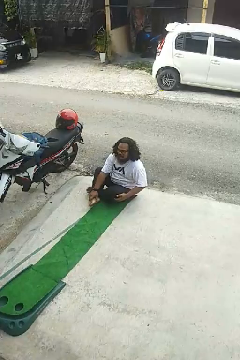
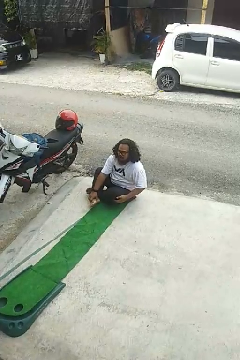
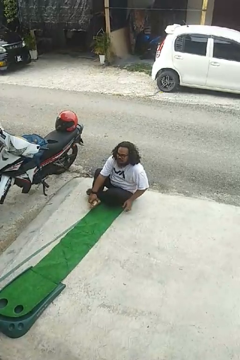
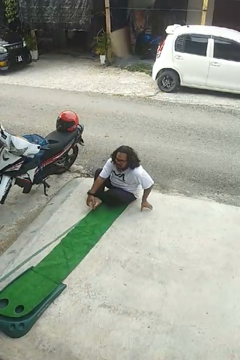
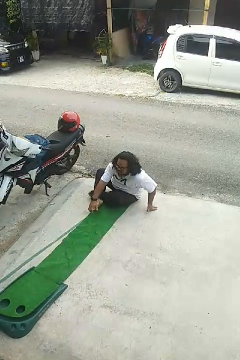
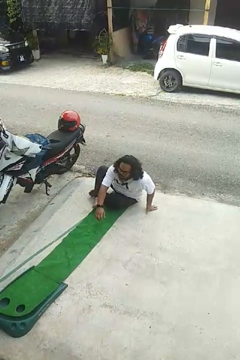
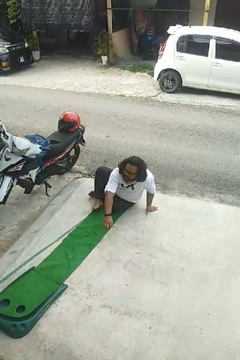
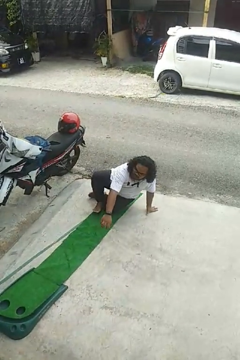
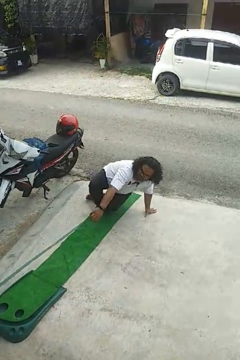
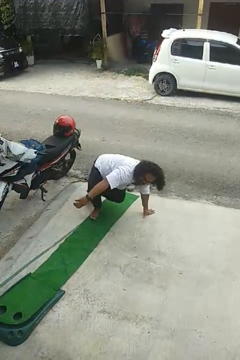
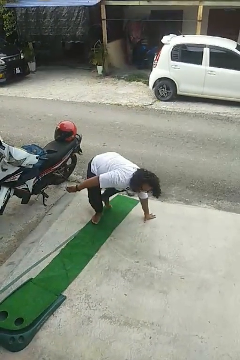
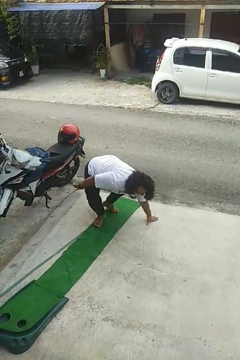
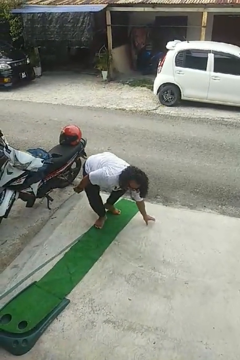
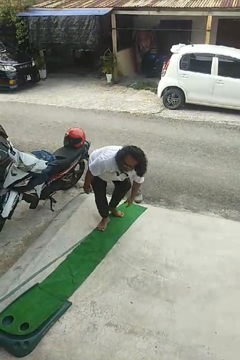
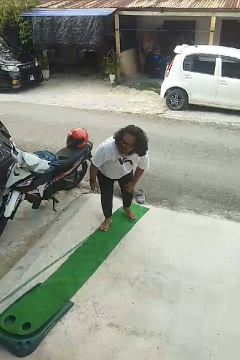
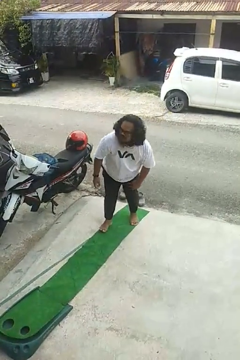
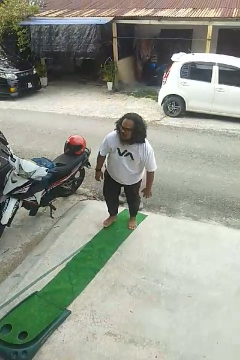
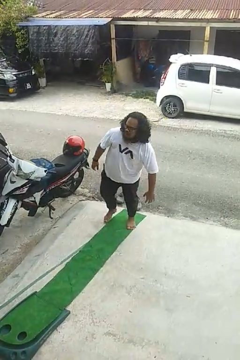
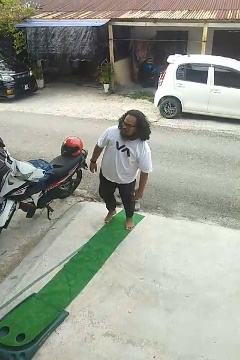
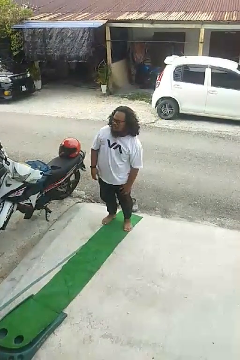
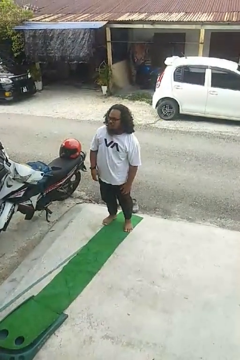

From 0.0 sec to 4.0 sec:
person stands up from floor

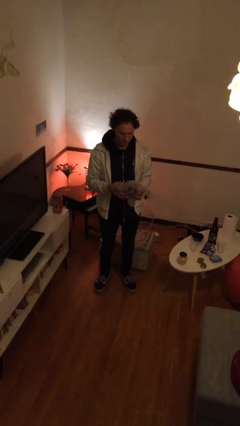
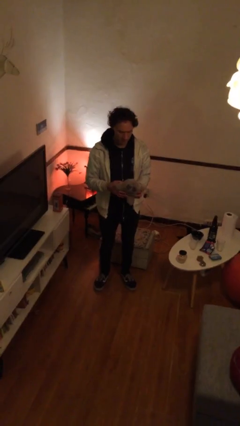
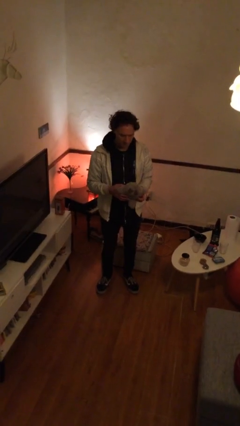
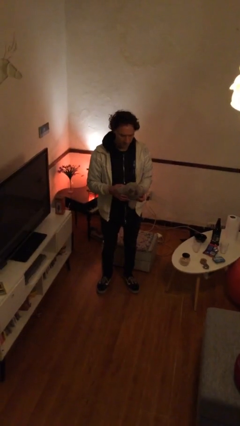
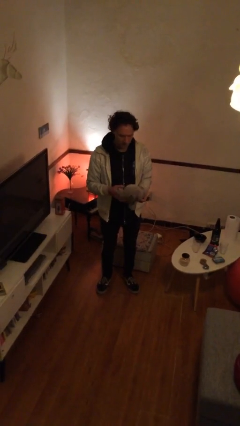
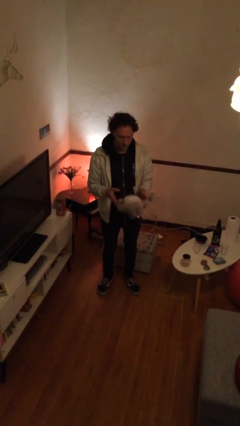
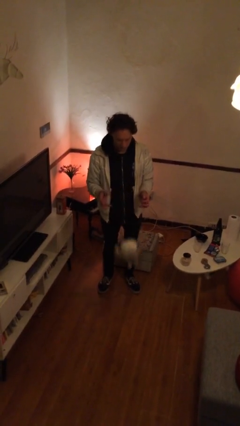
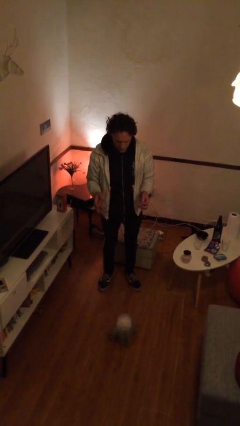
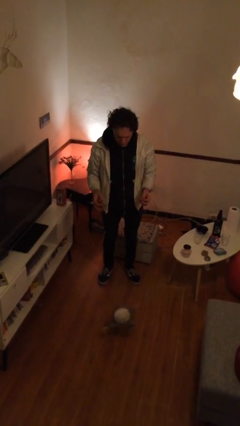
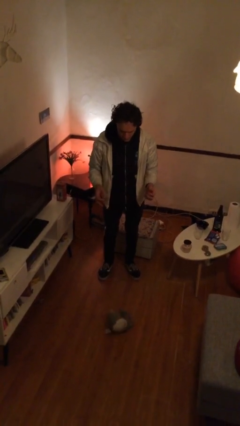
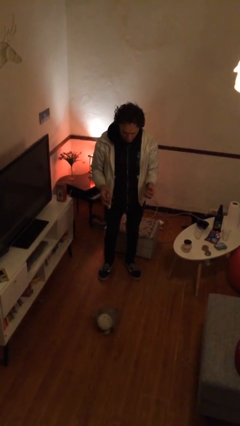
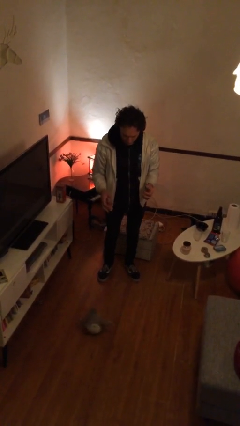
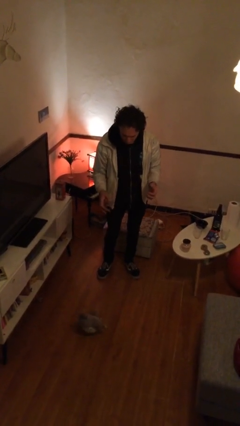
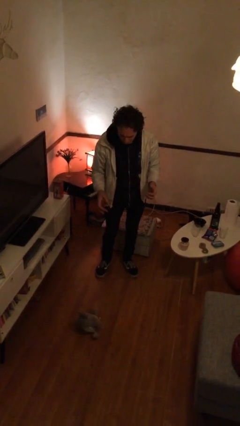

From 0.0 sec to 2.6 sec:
person drops object

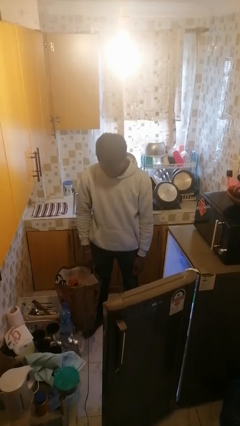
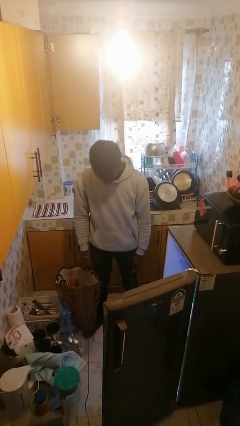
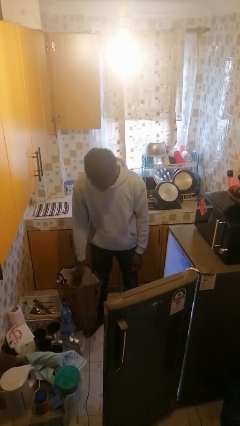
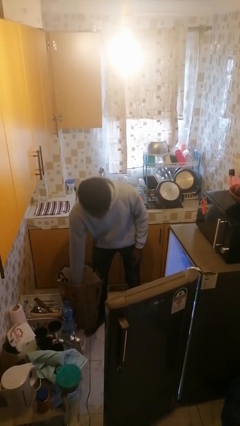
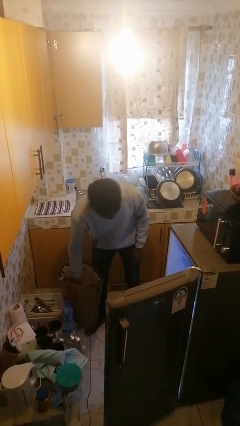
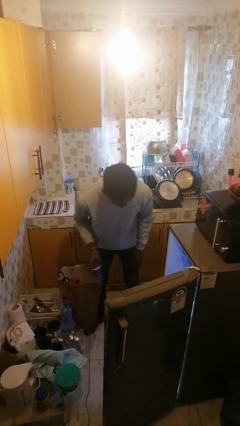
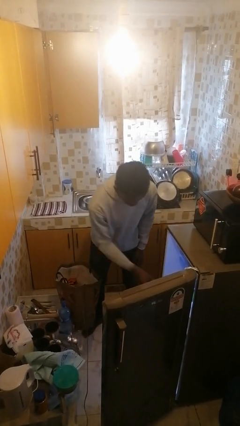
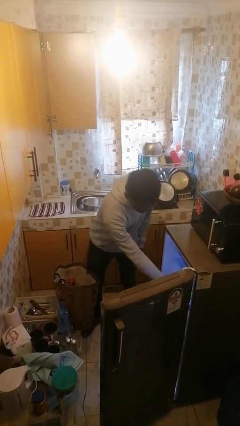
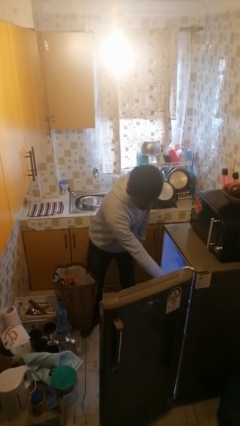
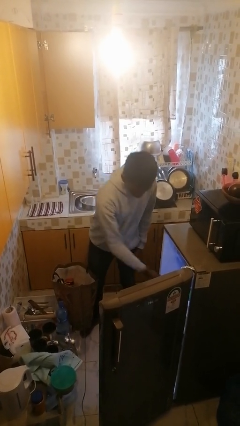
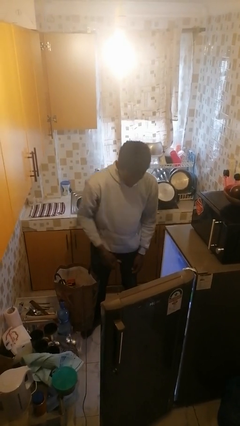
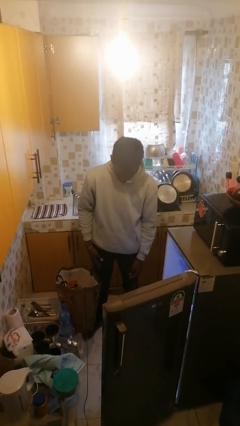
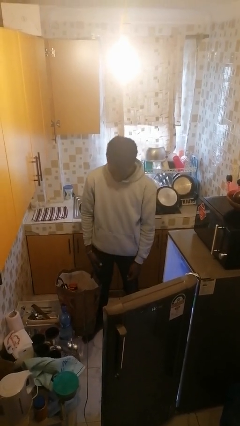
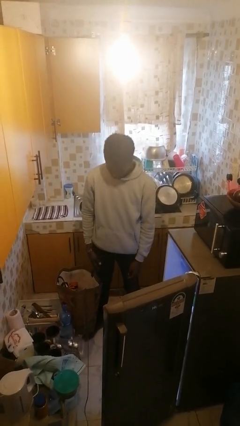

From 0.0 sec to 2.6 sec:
person loads groceries into refrigerator

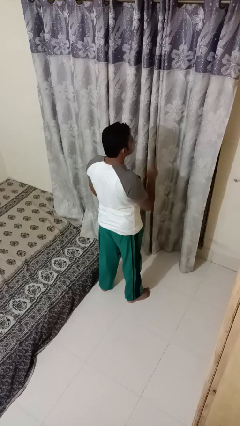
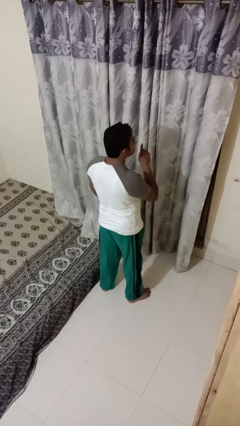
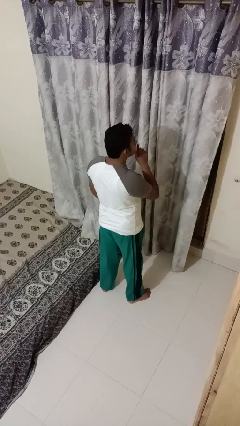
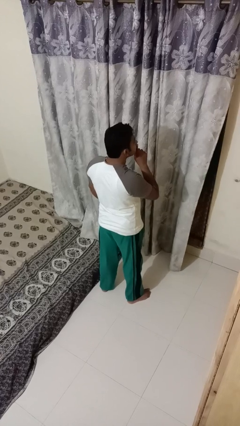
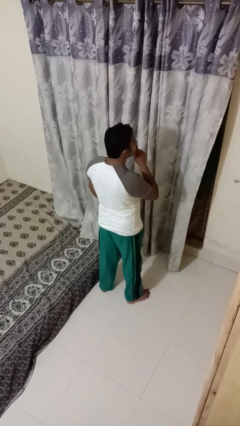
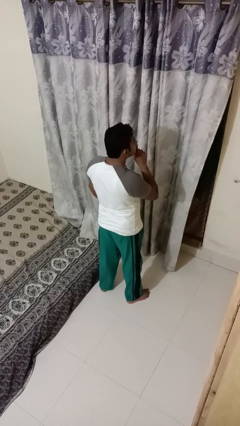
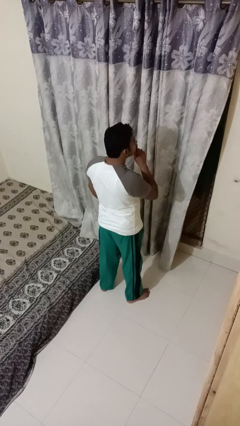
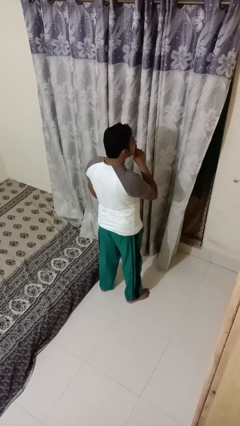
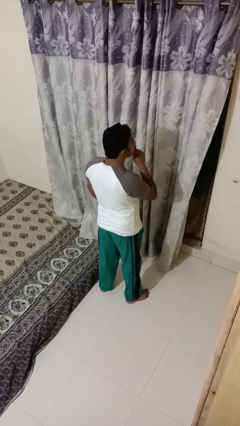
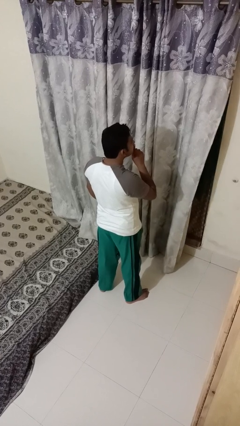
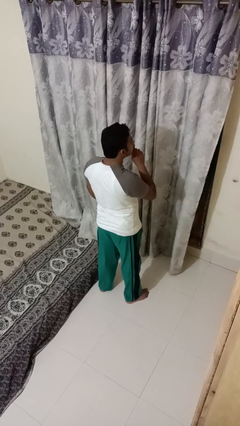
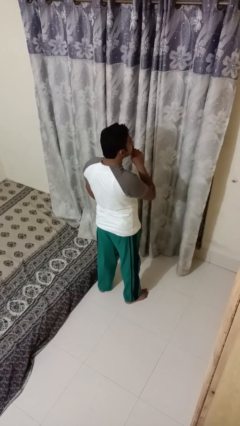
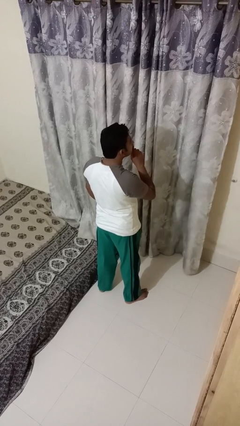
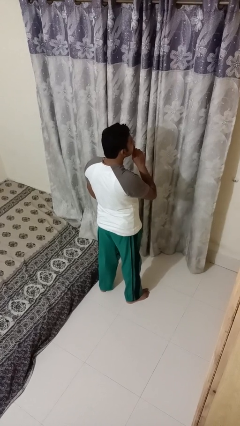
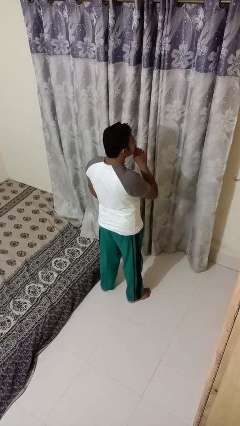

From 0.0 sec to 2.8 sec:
person gestures be quiet

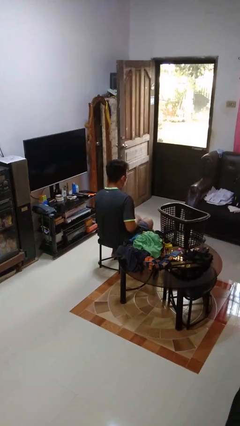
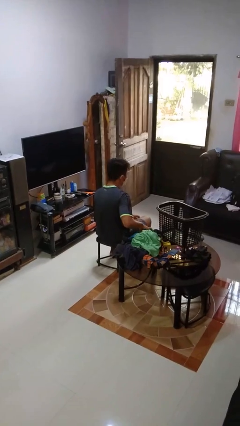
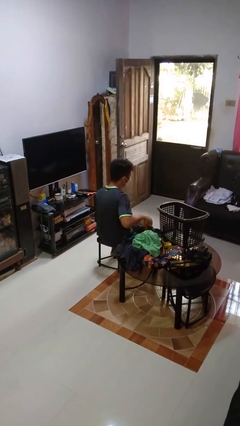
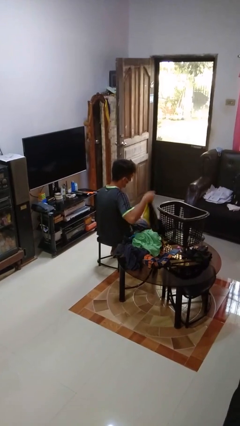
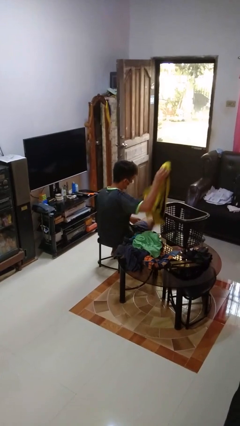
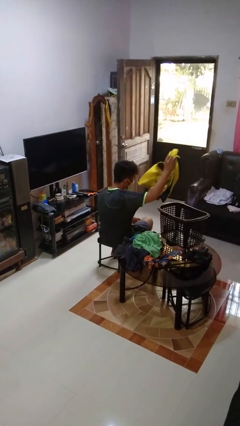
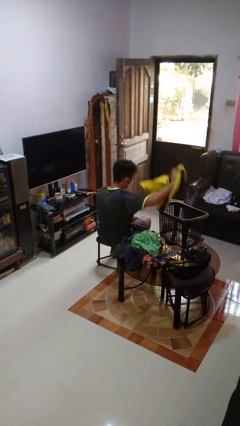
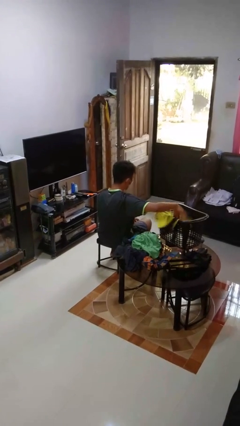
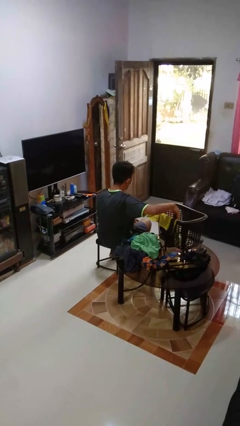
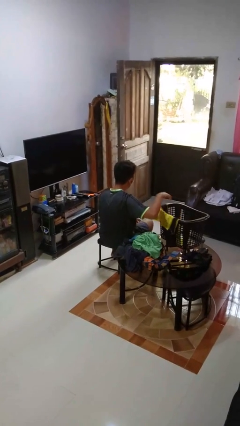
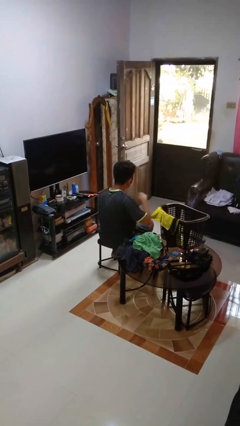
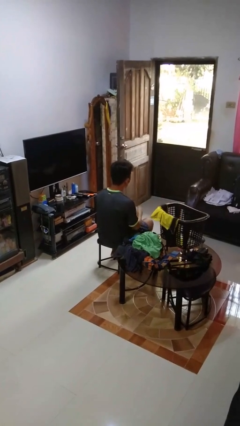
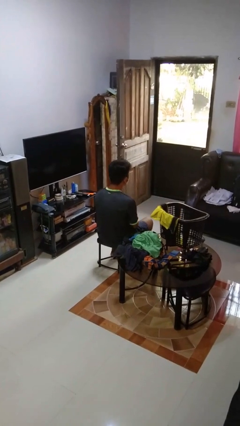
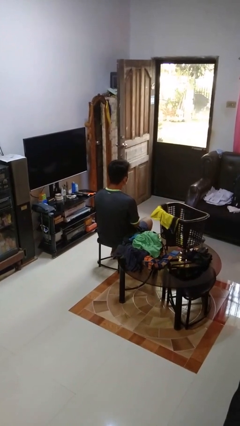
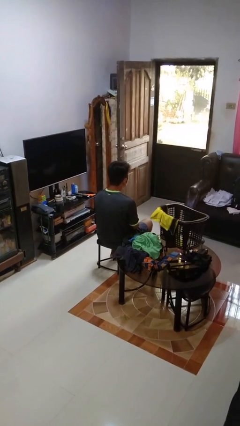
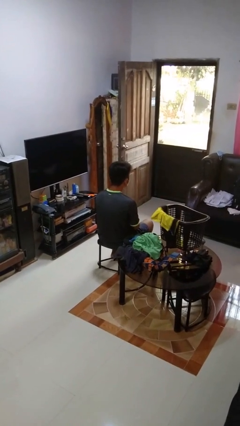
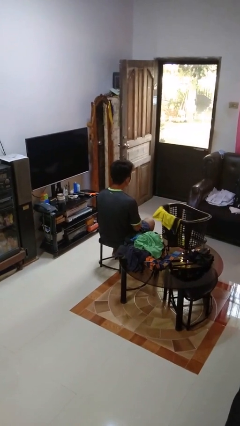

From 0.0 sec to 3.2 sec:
person puts object into basket

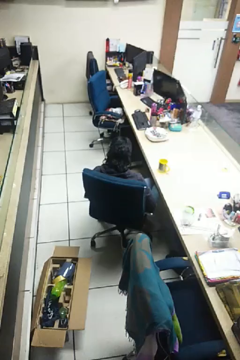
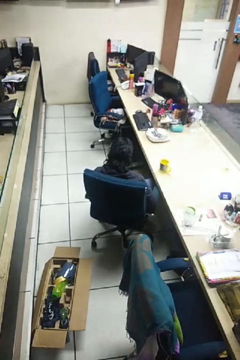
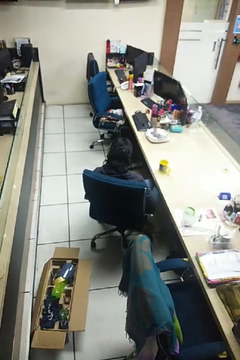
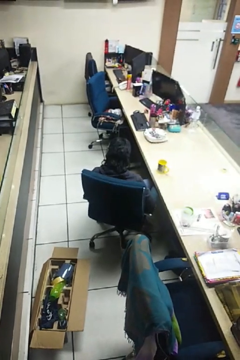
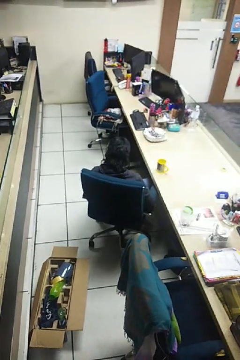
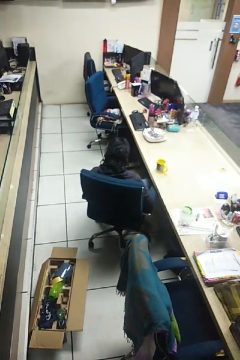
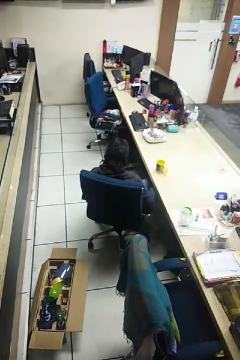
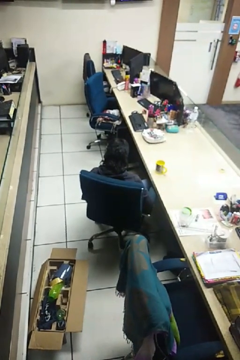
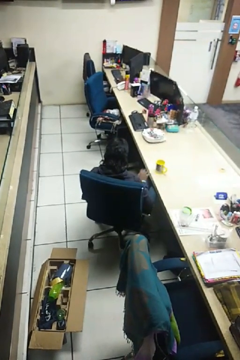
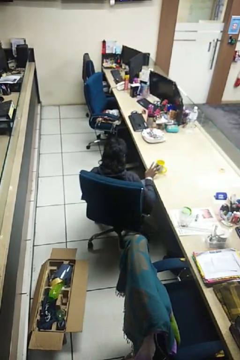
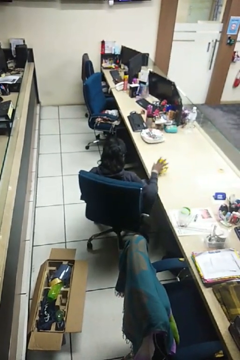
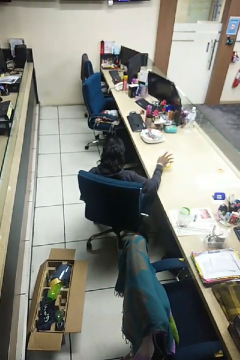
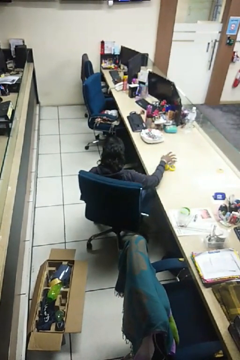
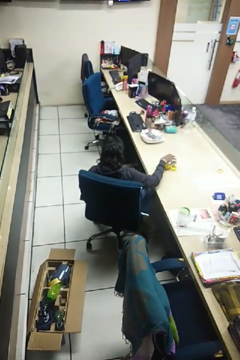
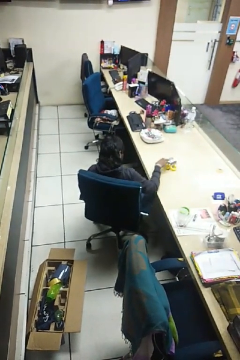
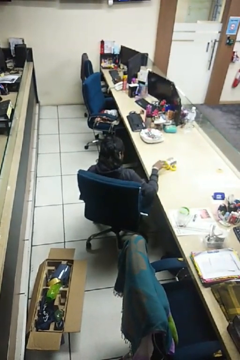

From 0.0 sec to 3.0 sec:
person knocks over glass
